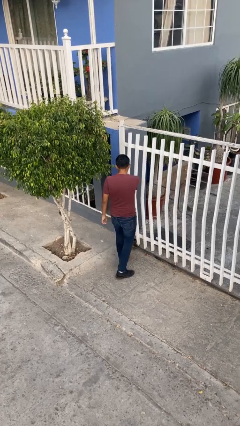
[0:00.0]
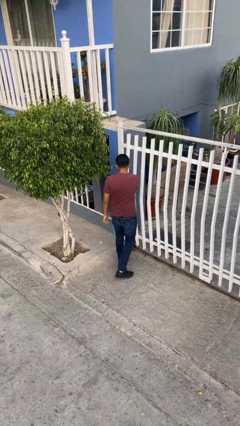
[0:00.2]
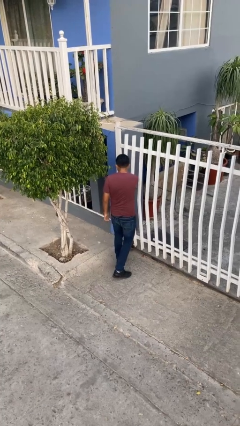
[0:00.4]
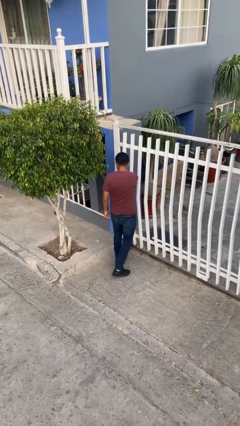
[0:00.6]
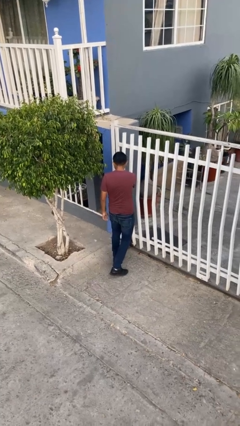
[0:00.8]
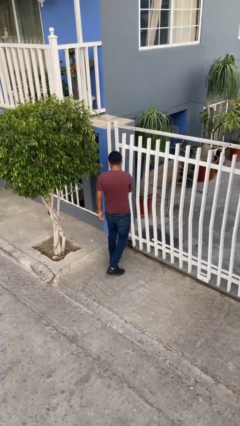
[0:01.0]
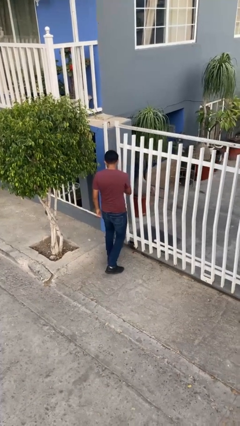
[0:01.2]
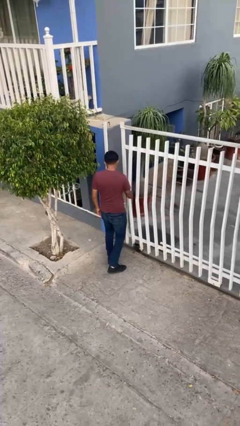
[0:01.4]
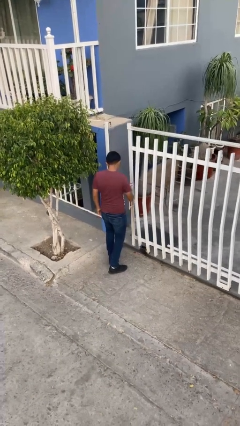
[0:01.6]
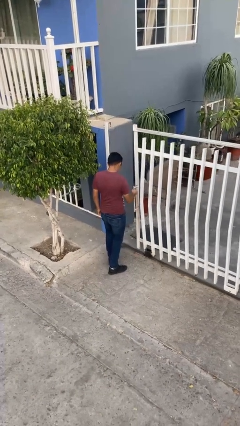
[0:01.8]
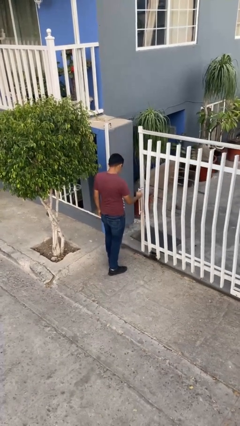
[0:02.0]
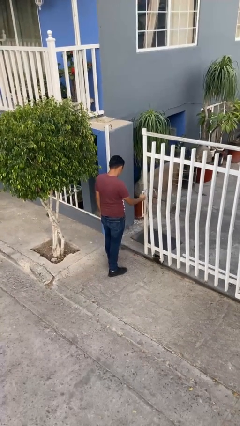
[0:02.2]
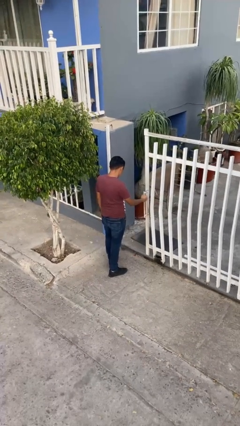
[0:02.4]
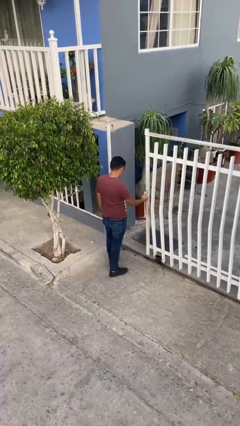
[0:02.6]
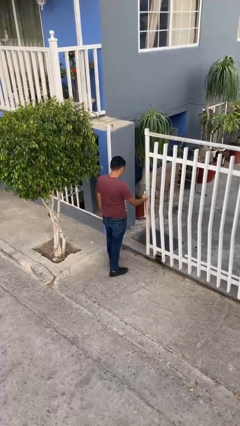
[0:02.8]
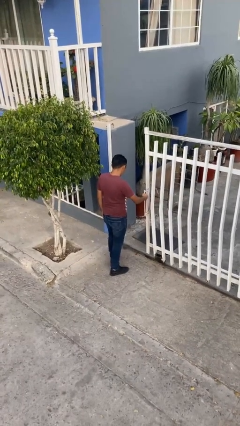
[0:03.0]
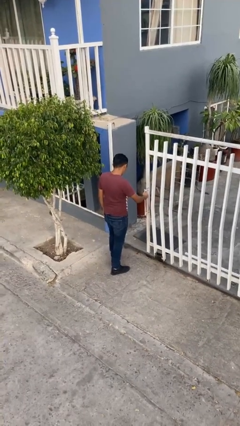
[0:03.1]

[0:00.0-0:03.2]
person opens facility door

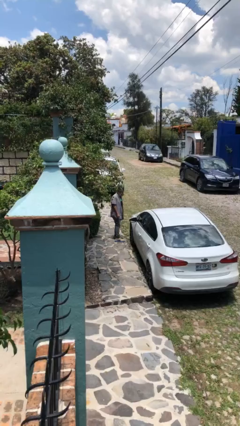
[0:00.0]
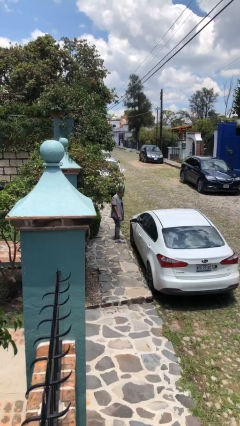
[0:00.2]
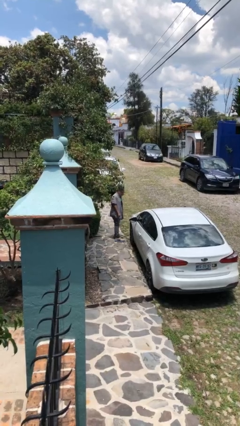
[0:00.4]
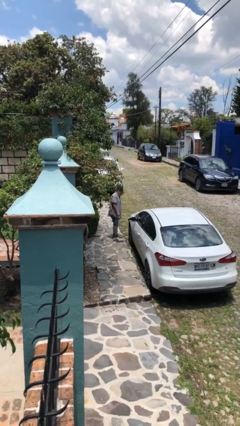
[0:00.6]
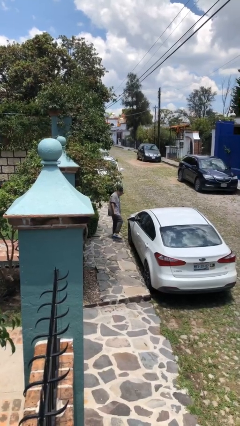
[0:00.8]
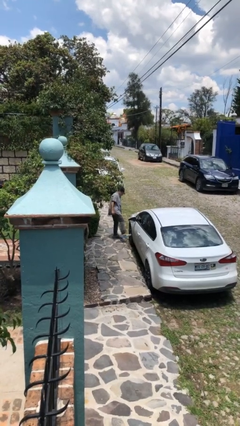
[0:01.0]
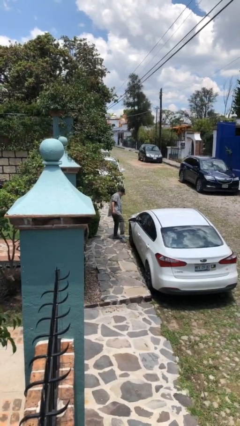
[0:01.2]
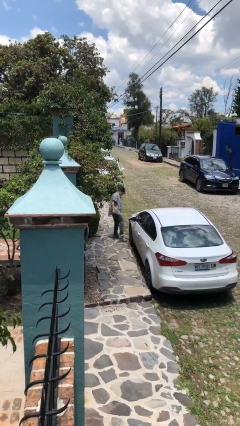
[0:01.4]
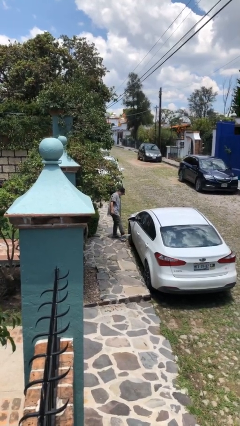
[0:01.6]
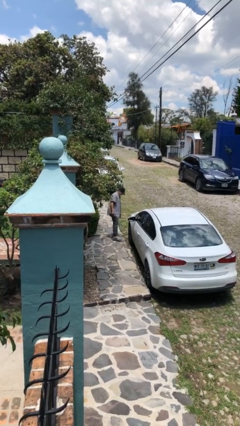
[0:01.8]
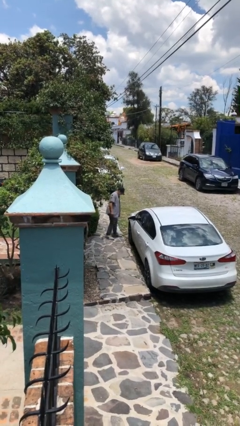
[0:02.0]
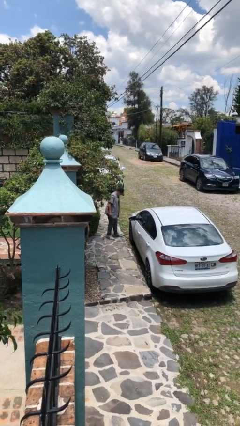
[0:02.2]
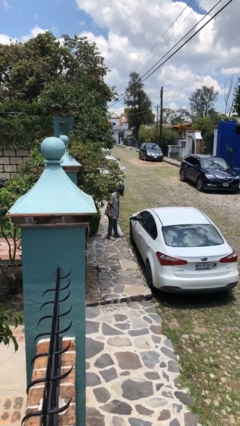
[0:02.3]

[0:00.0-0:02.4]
person kicks car tires

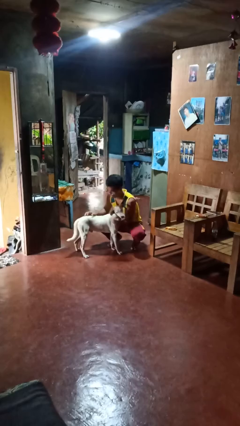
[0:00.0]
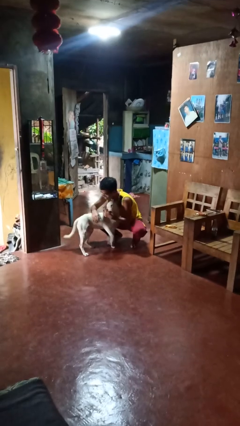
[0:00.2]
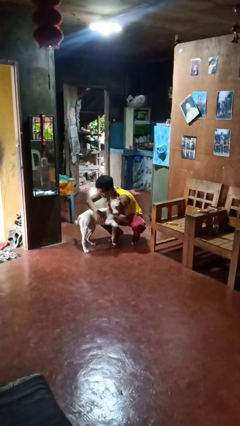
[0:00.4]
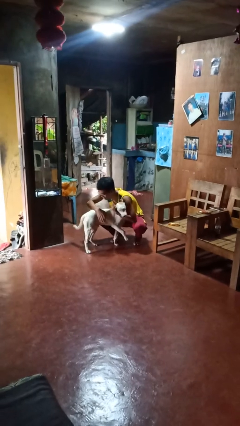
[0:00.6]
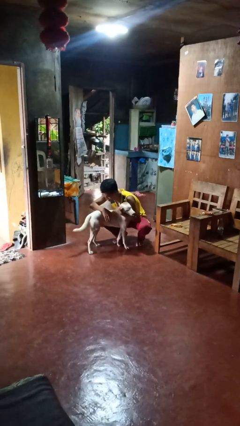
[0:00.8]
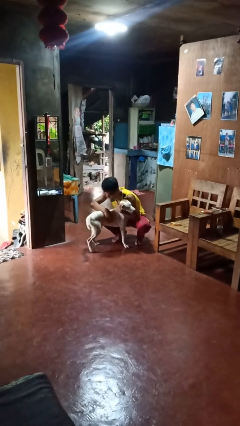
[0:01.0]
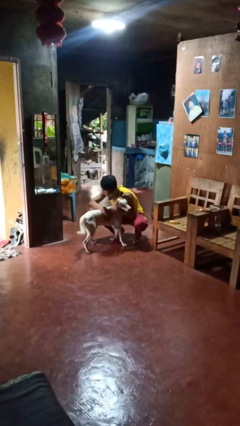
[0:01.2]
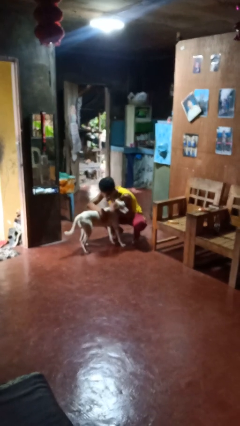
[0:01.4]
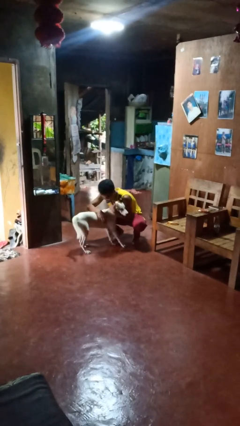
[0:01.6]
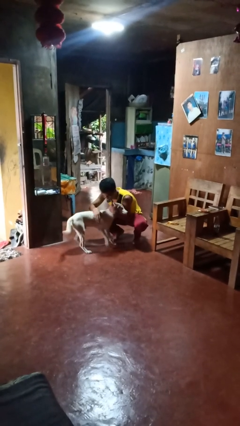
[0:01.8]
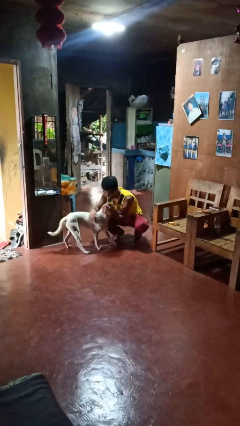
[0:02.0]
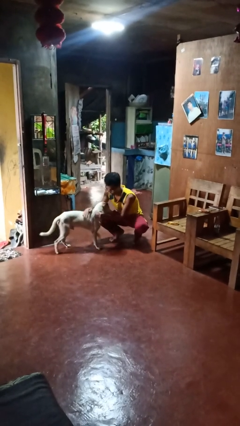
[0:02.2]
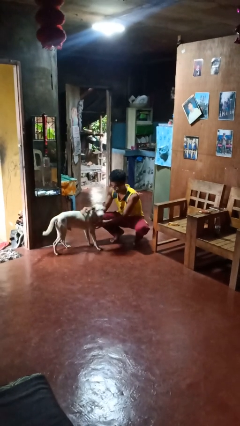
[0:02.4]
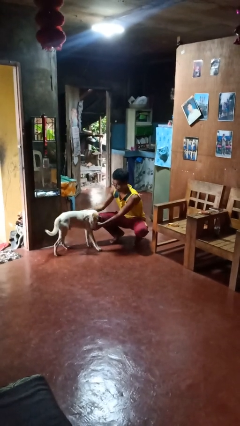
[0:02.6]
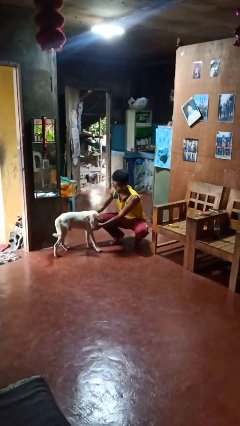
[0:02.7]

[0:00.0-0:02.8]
person hugs dog

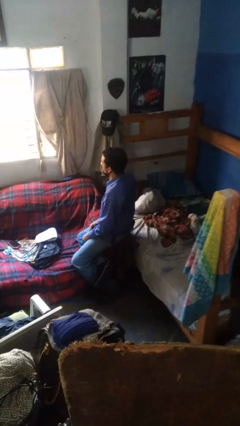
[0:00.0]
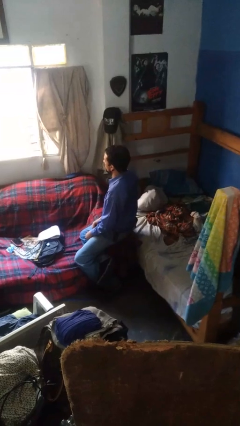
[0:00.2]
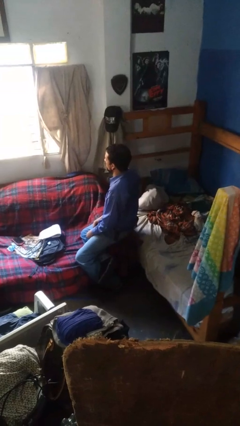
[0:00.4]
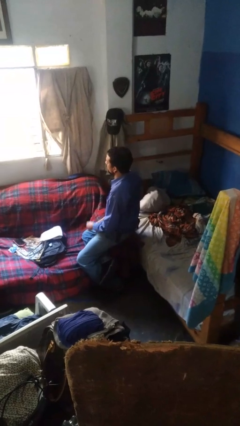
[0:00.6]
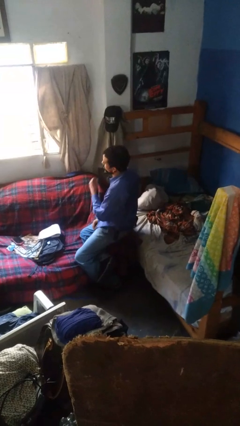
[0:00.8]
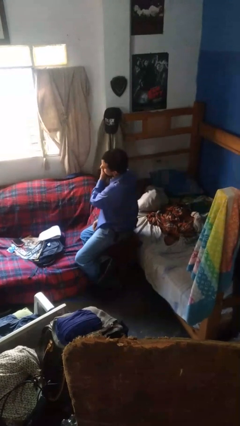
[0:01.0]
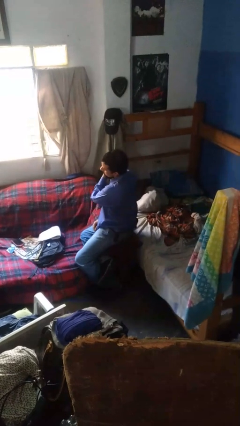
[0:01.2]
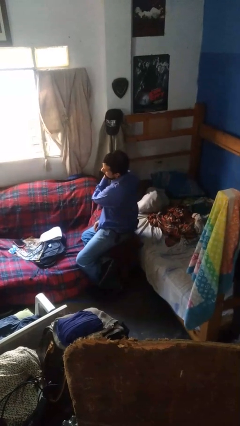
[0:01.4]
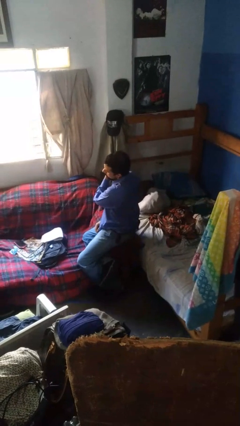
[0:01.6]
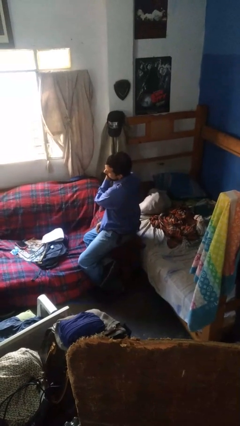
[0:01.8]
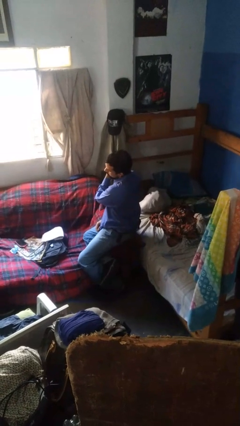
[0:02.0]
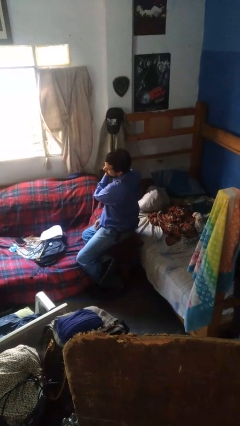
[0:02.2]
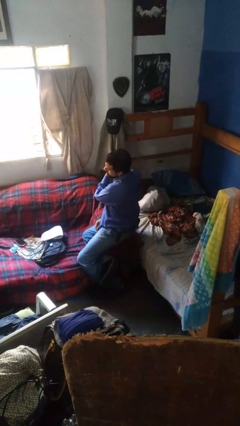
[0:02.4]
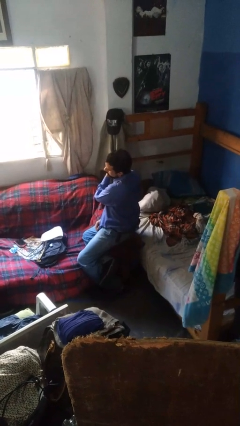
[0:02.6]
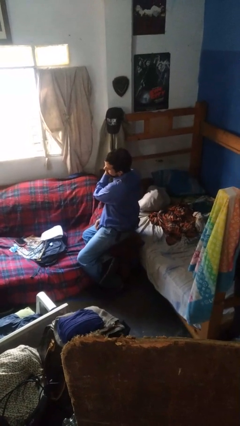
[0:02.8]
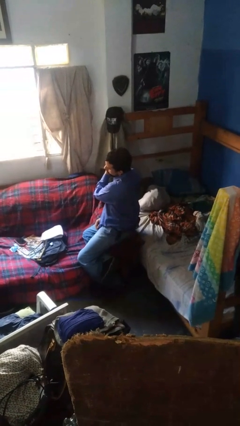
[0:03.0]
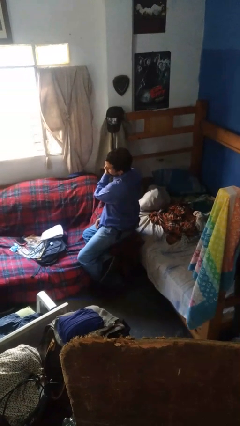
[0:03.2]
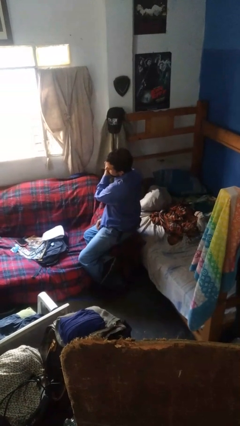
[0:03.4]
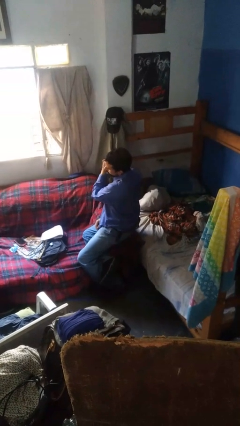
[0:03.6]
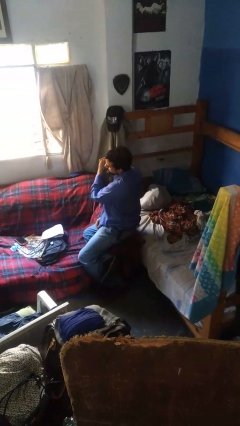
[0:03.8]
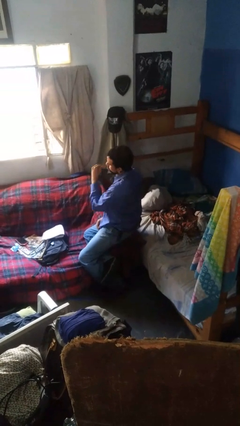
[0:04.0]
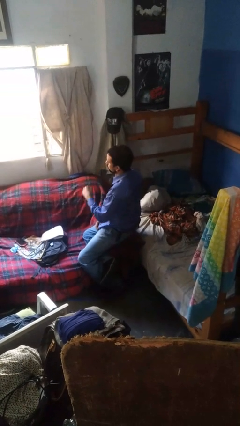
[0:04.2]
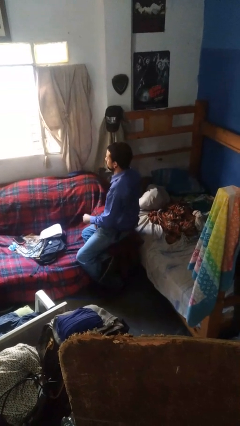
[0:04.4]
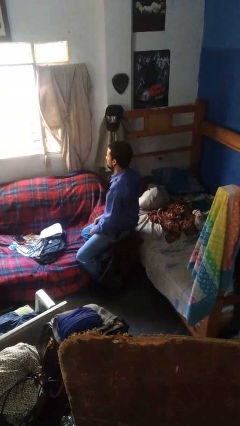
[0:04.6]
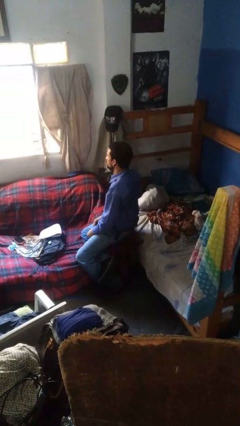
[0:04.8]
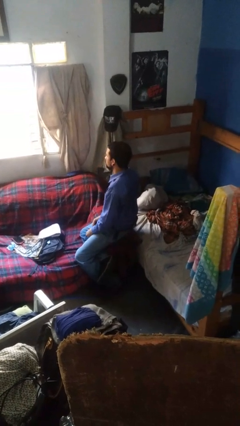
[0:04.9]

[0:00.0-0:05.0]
person touches earlobe

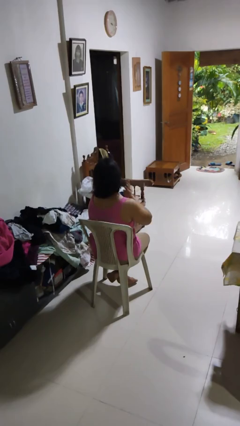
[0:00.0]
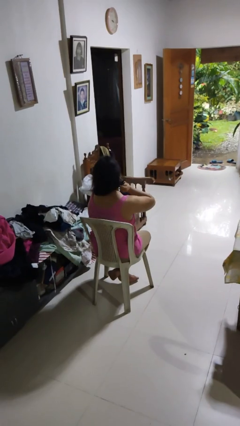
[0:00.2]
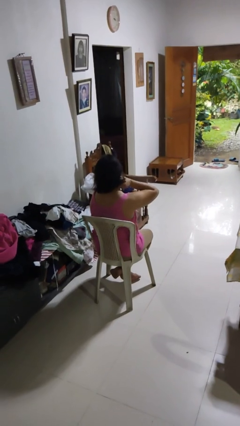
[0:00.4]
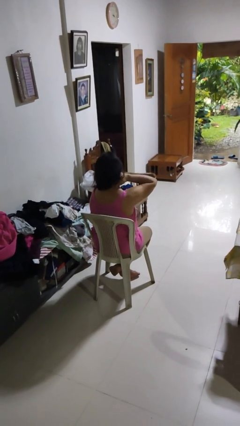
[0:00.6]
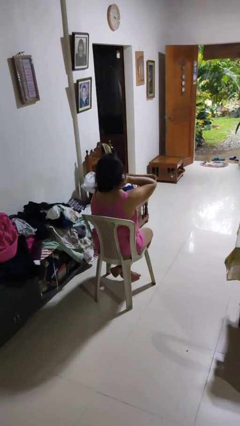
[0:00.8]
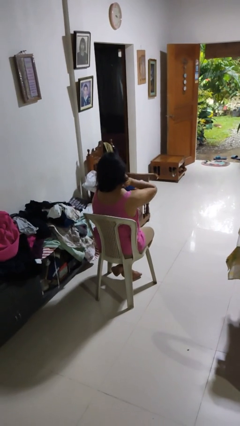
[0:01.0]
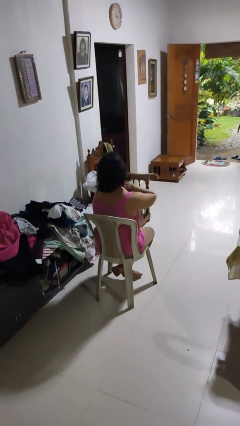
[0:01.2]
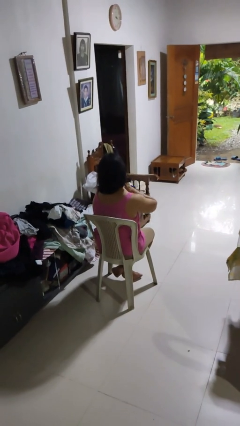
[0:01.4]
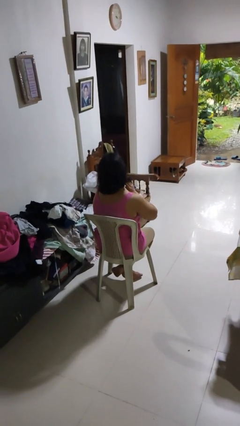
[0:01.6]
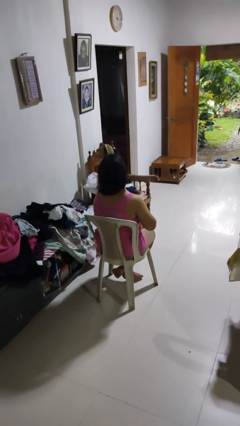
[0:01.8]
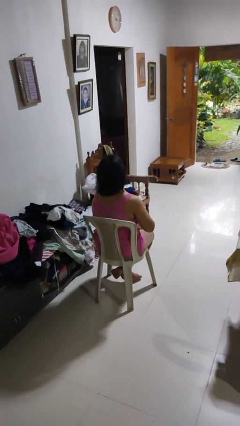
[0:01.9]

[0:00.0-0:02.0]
person rubs neck

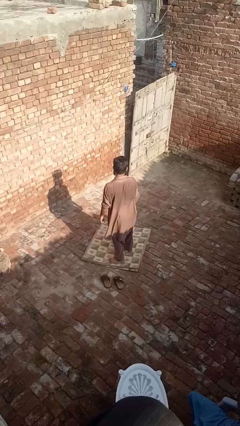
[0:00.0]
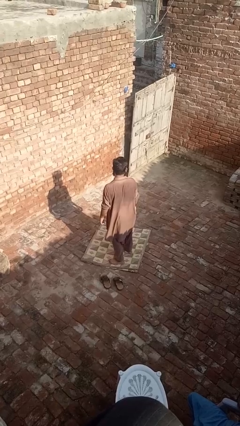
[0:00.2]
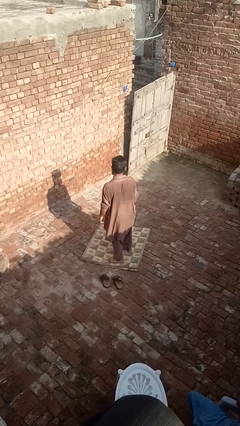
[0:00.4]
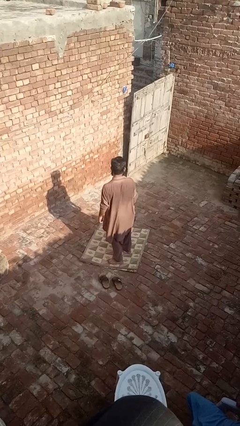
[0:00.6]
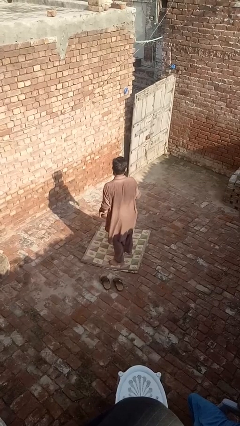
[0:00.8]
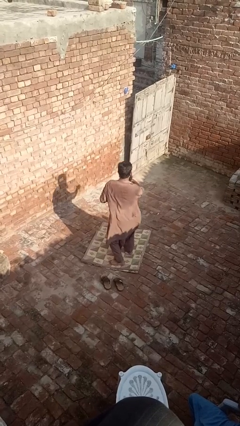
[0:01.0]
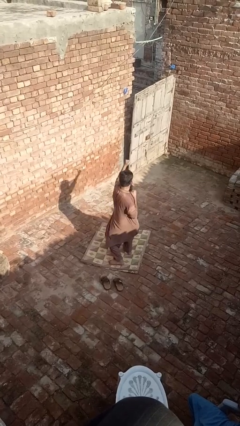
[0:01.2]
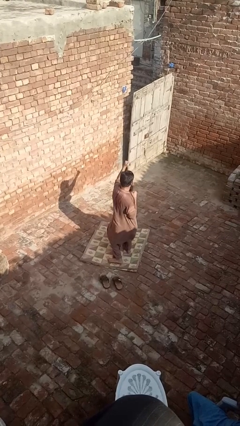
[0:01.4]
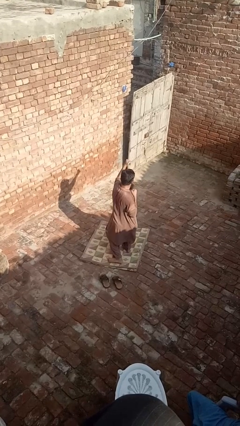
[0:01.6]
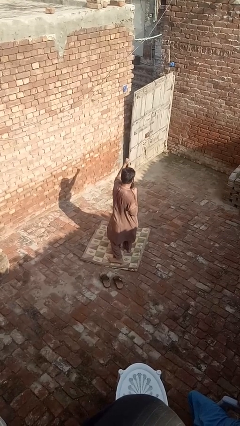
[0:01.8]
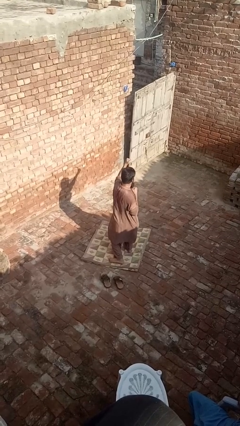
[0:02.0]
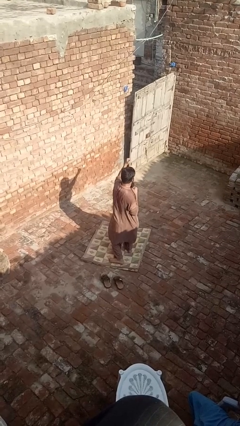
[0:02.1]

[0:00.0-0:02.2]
person karate chop
